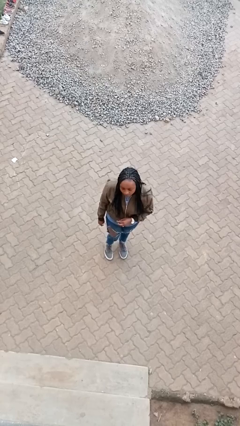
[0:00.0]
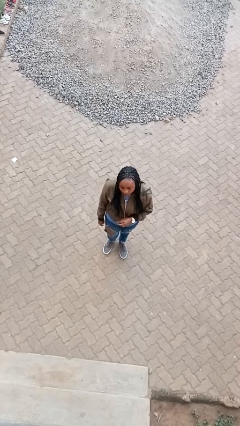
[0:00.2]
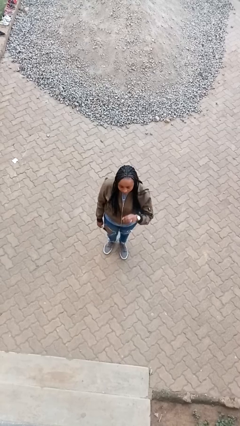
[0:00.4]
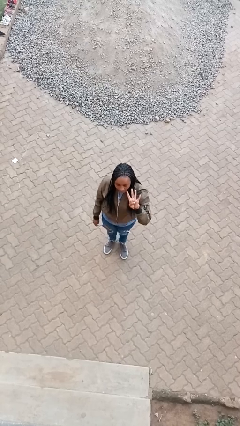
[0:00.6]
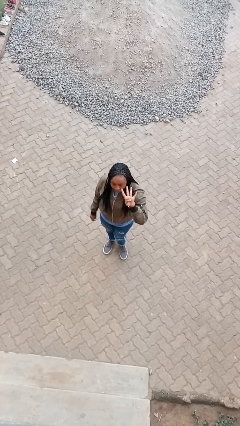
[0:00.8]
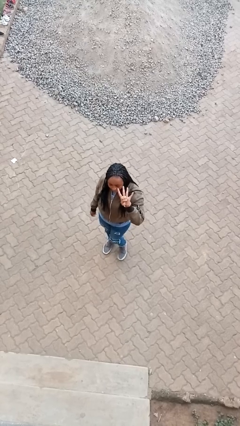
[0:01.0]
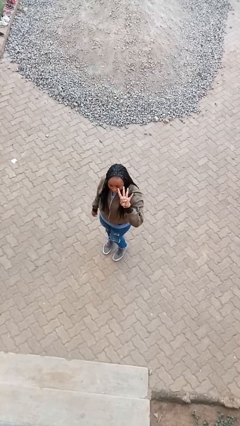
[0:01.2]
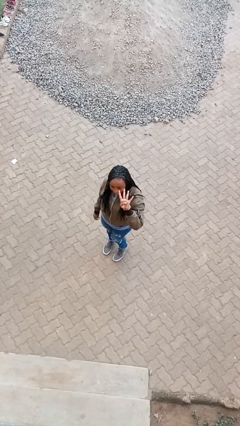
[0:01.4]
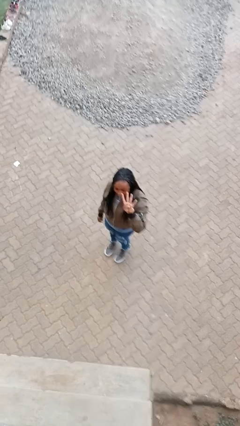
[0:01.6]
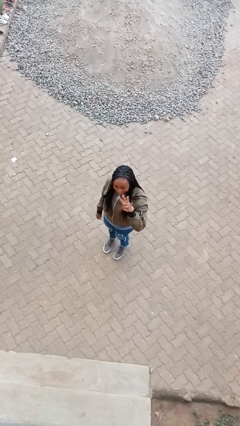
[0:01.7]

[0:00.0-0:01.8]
person gestures number four

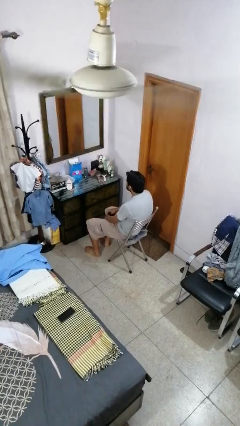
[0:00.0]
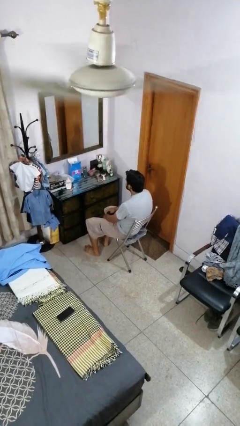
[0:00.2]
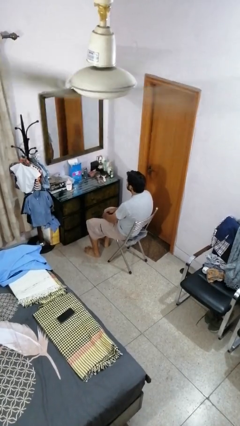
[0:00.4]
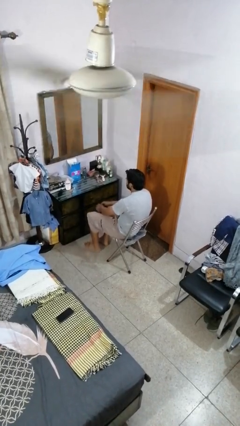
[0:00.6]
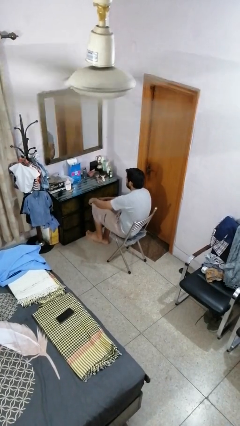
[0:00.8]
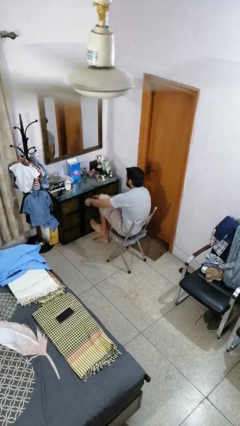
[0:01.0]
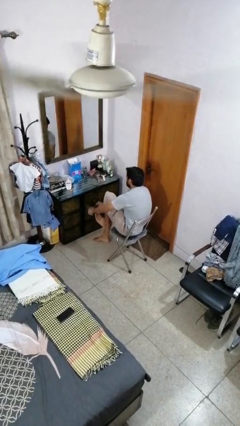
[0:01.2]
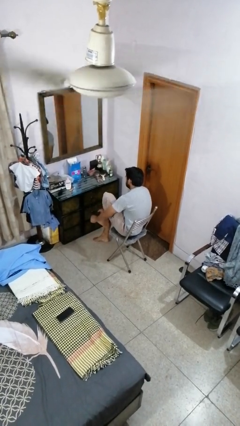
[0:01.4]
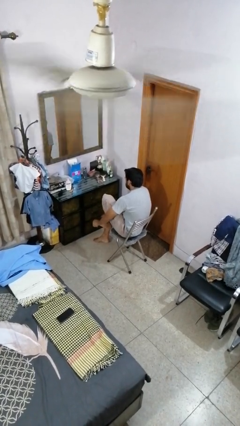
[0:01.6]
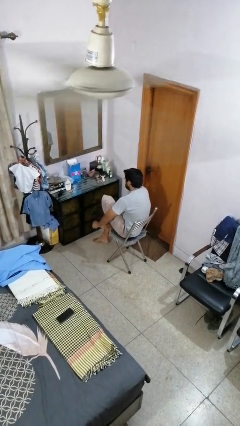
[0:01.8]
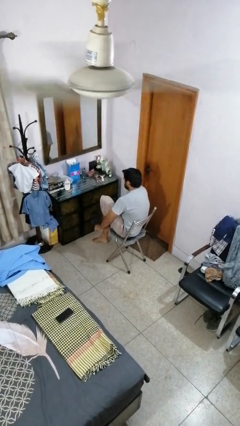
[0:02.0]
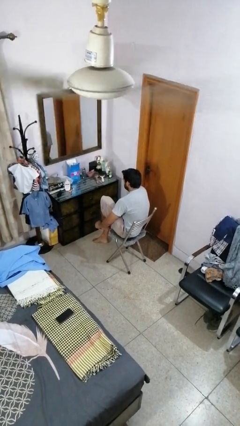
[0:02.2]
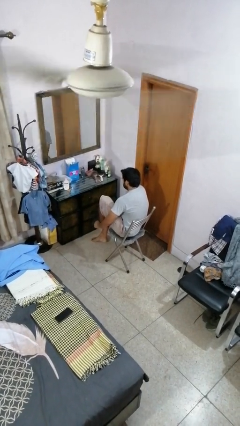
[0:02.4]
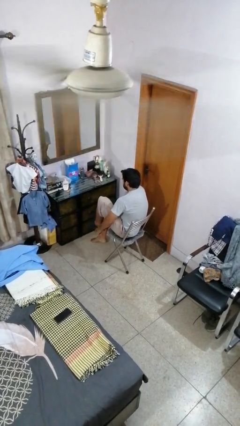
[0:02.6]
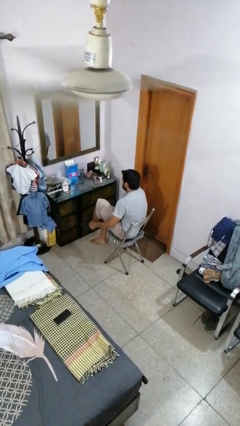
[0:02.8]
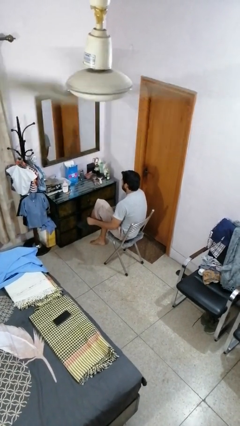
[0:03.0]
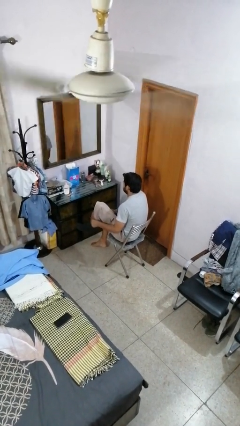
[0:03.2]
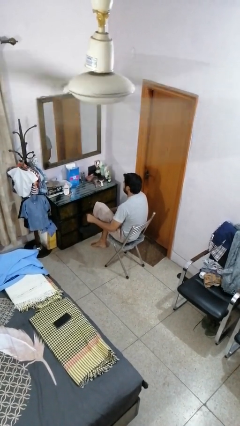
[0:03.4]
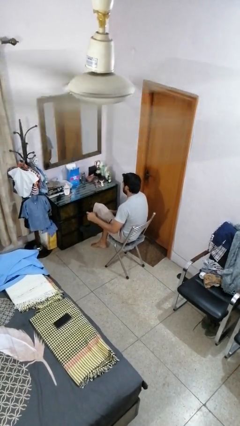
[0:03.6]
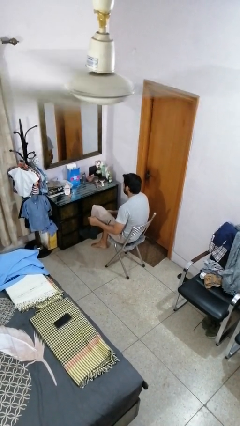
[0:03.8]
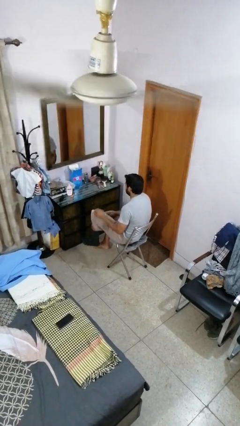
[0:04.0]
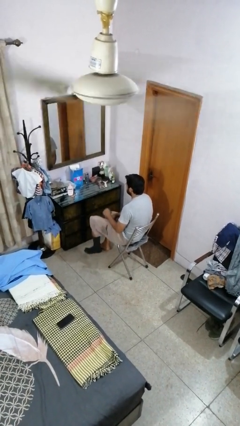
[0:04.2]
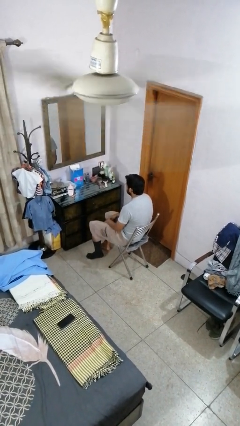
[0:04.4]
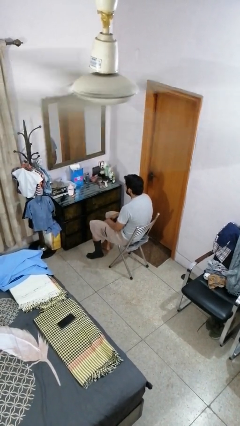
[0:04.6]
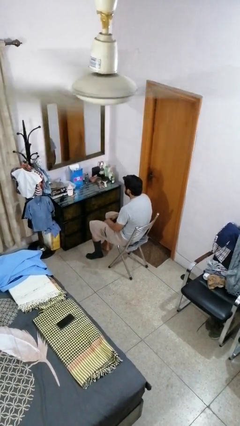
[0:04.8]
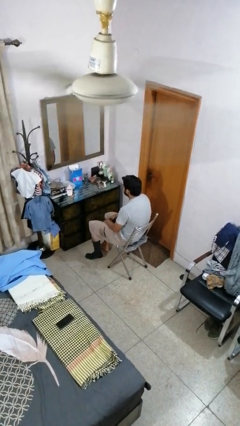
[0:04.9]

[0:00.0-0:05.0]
person puts on socks

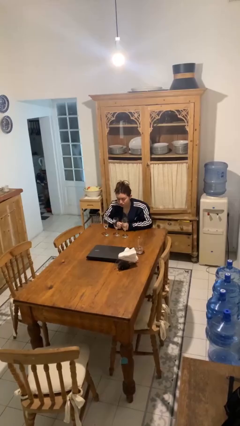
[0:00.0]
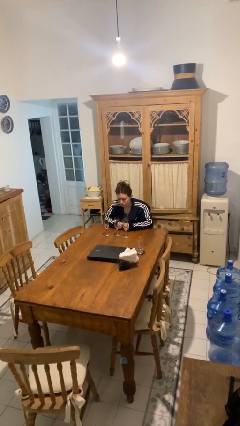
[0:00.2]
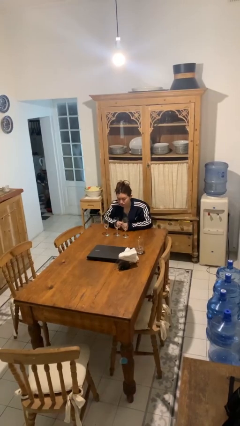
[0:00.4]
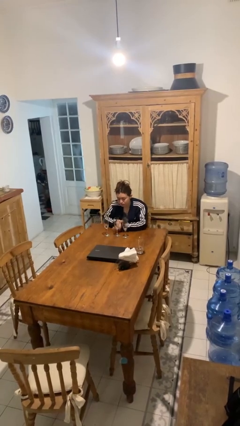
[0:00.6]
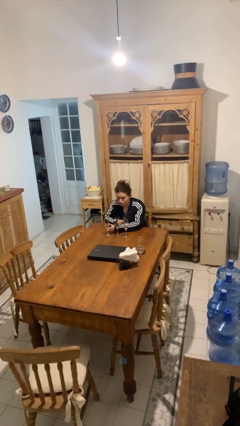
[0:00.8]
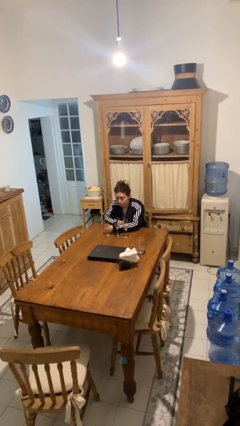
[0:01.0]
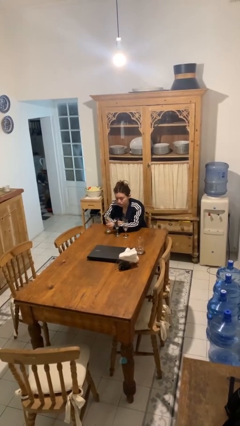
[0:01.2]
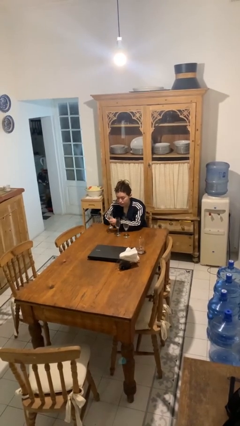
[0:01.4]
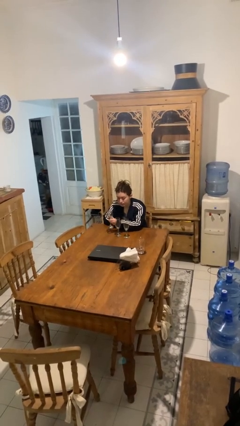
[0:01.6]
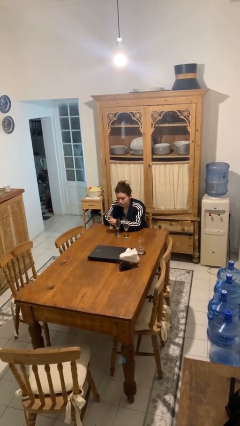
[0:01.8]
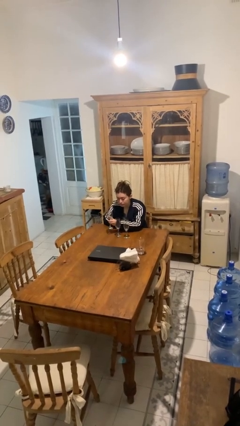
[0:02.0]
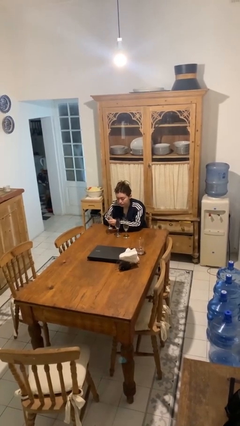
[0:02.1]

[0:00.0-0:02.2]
person picks up object from table

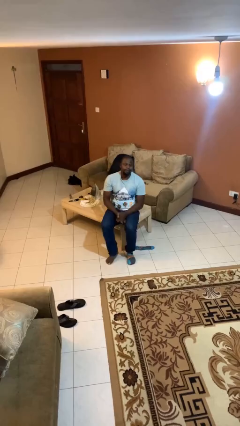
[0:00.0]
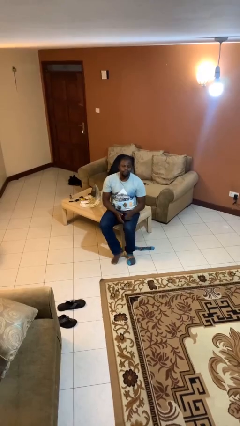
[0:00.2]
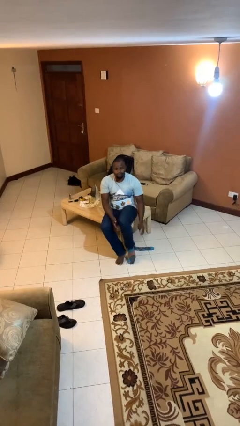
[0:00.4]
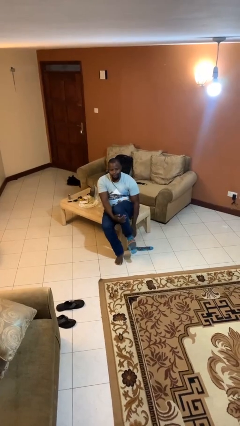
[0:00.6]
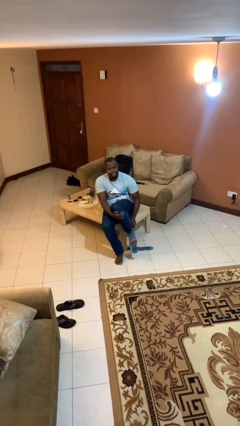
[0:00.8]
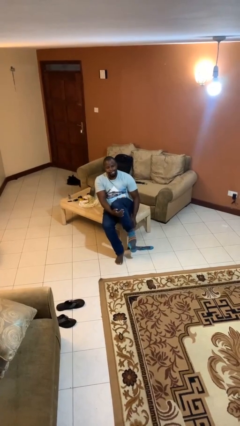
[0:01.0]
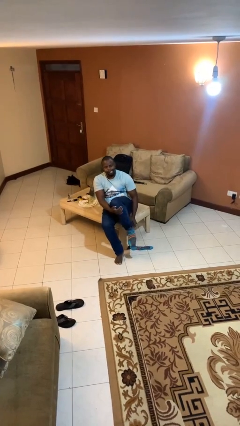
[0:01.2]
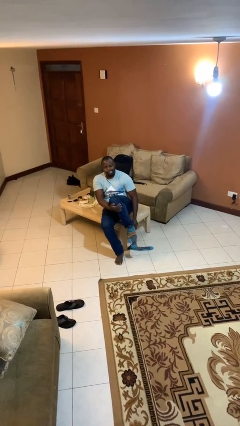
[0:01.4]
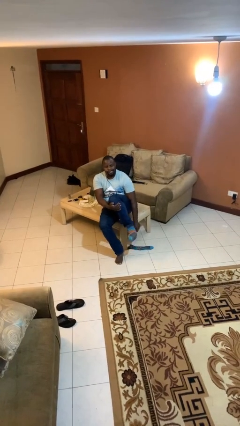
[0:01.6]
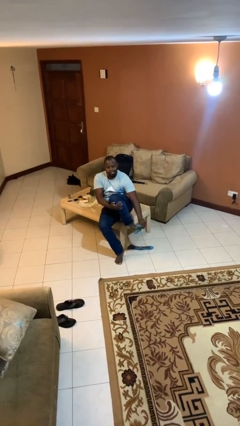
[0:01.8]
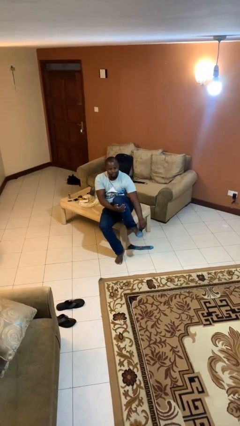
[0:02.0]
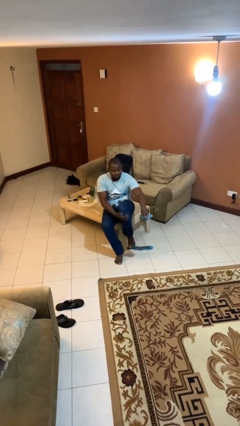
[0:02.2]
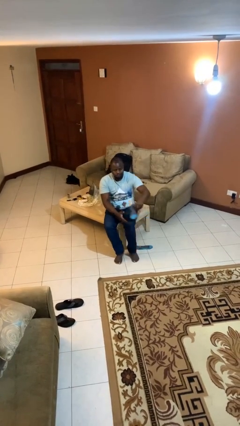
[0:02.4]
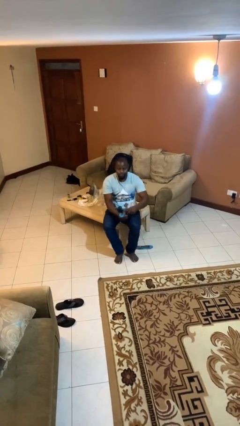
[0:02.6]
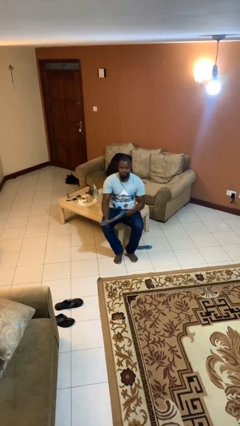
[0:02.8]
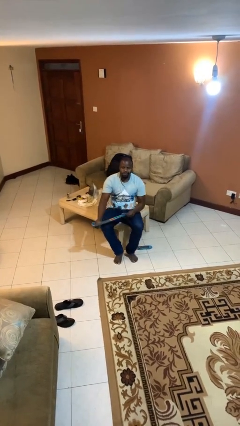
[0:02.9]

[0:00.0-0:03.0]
person takes off socks

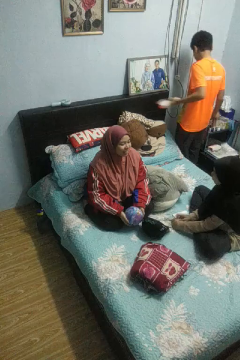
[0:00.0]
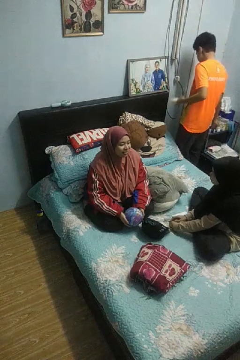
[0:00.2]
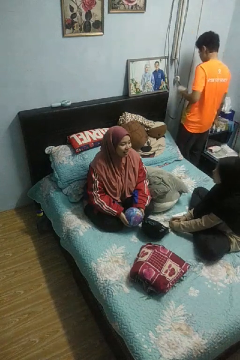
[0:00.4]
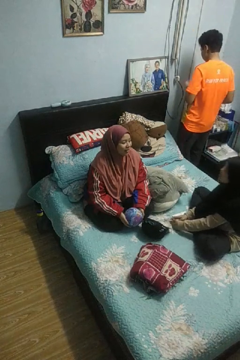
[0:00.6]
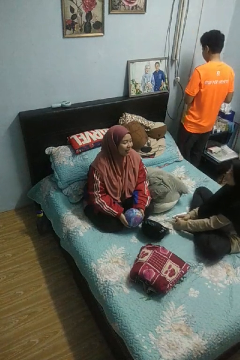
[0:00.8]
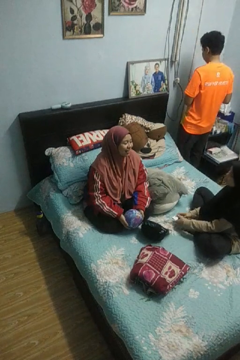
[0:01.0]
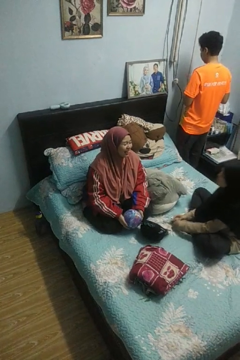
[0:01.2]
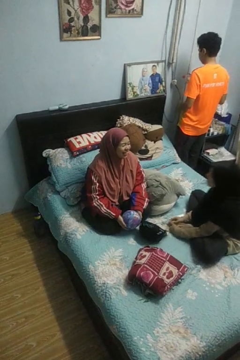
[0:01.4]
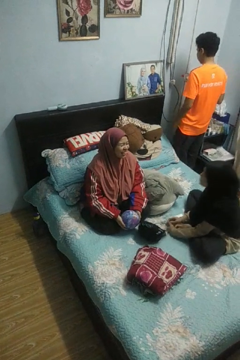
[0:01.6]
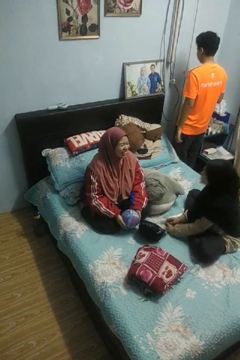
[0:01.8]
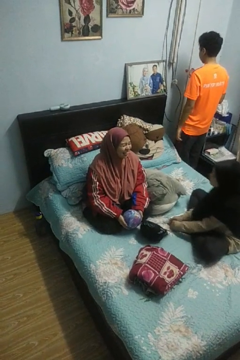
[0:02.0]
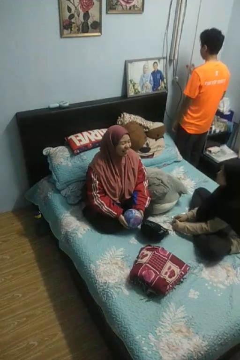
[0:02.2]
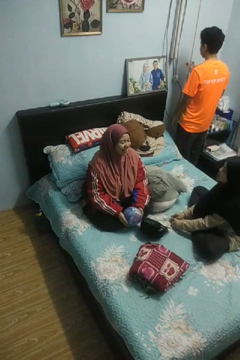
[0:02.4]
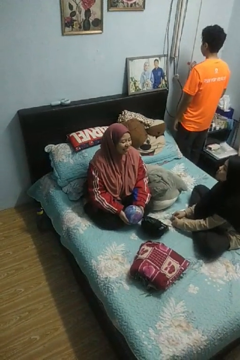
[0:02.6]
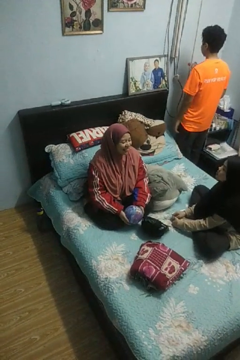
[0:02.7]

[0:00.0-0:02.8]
person laughs with person

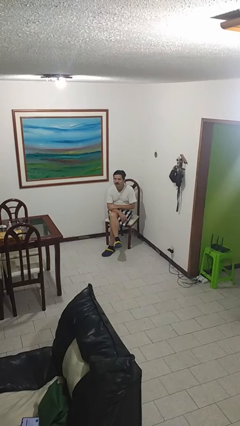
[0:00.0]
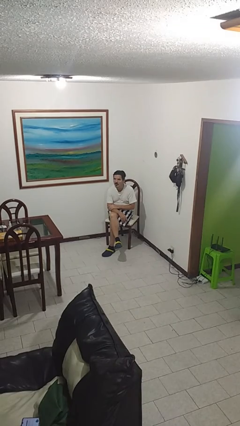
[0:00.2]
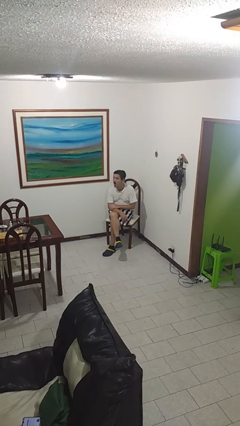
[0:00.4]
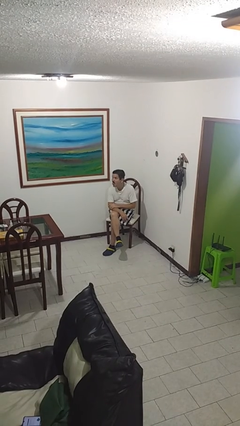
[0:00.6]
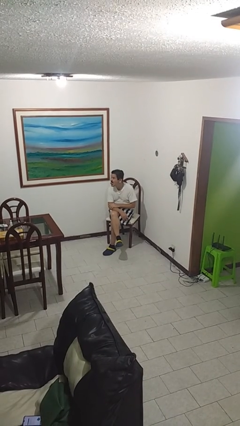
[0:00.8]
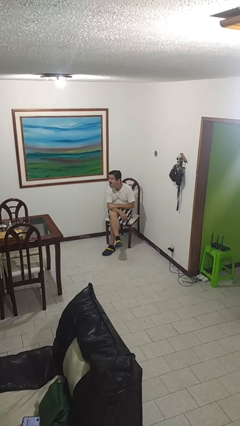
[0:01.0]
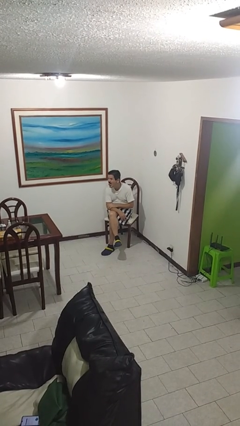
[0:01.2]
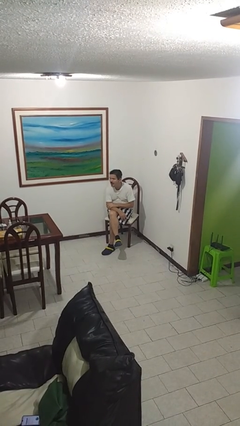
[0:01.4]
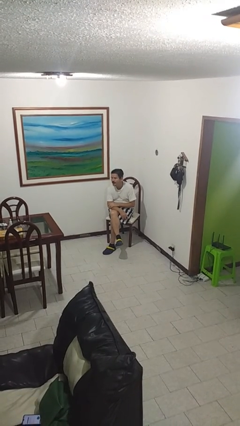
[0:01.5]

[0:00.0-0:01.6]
person sticks out tongue

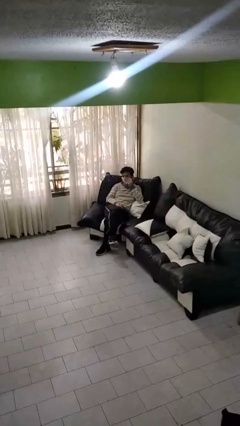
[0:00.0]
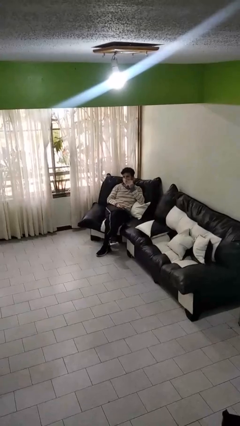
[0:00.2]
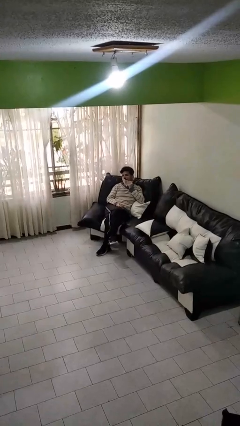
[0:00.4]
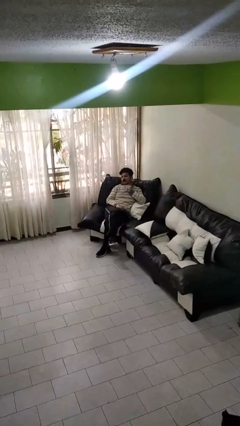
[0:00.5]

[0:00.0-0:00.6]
person wipes mouth with napkin

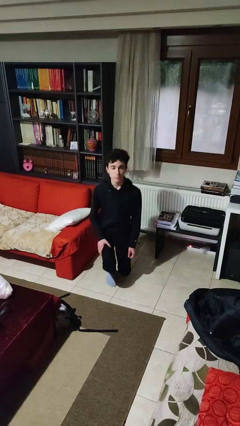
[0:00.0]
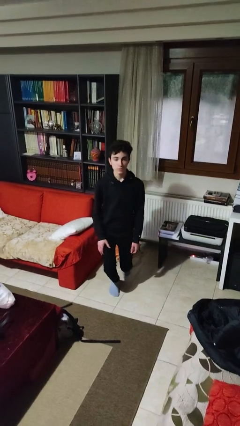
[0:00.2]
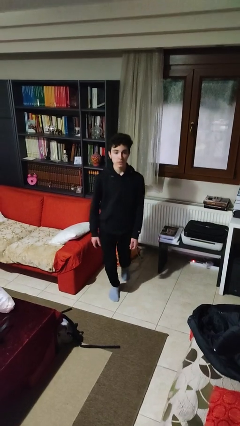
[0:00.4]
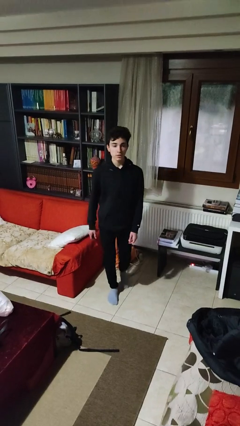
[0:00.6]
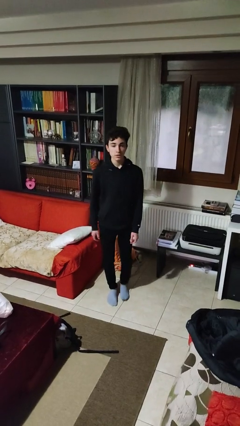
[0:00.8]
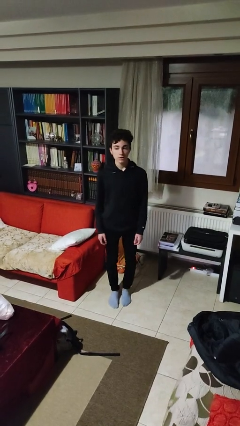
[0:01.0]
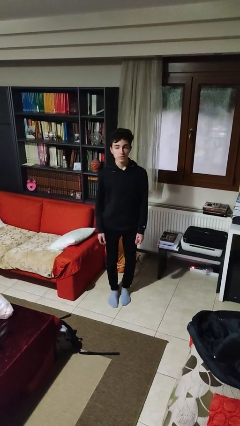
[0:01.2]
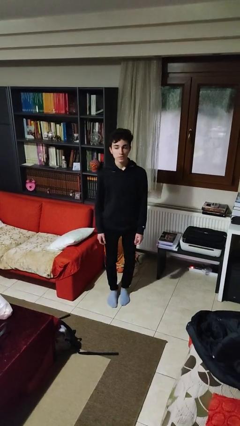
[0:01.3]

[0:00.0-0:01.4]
person stands up from floor
